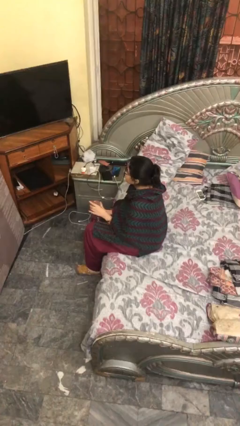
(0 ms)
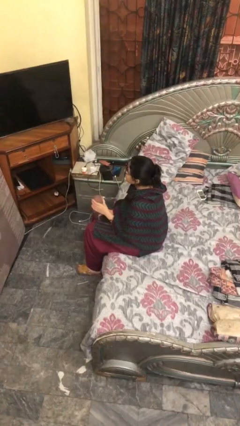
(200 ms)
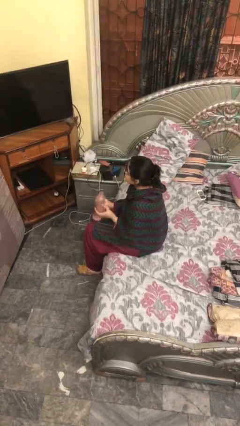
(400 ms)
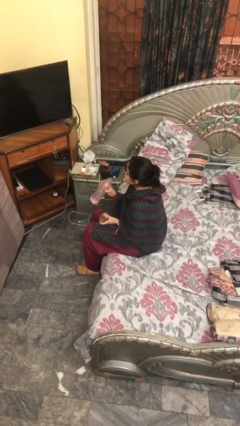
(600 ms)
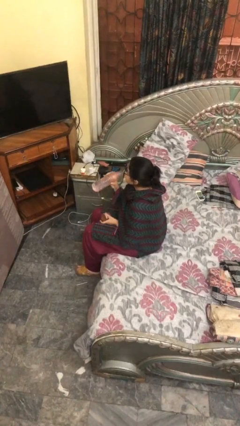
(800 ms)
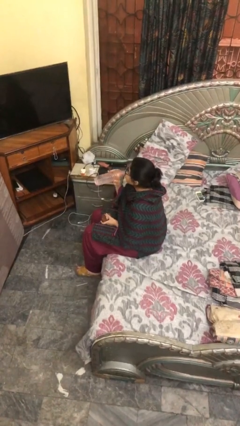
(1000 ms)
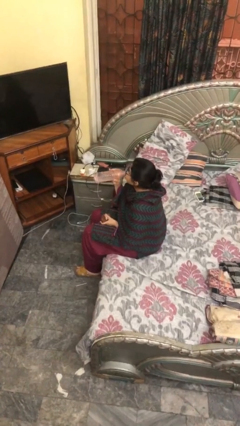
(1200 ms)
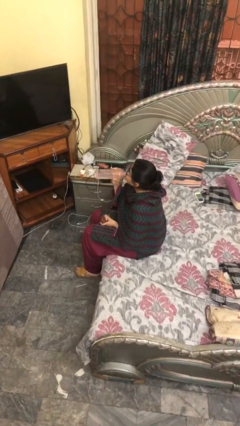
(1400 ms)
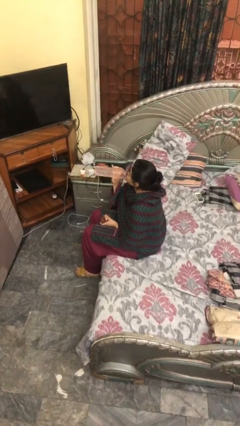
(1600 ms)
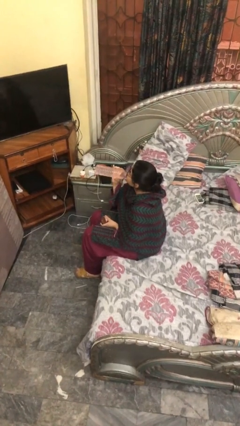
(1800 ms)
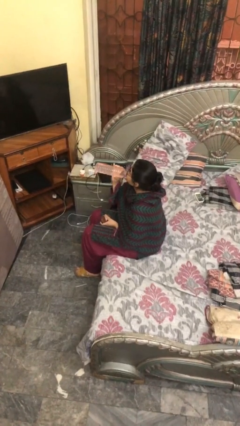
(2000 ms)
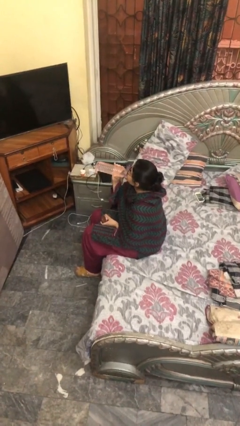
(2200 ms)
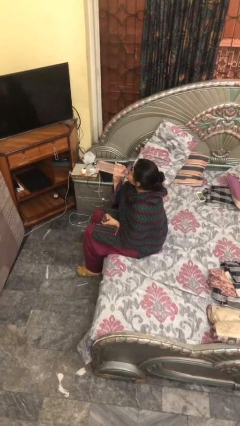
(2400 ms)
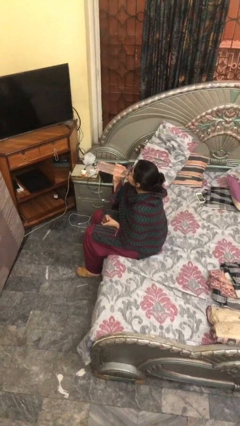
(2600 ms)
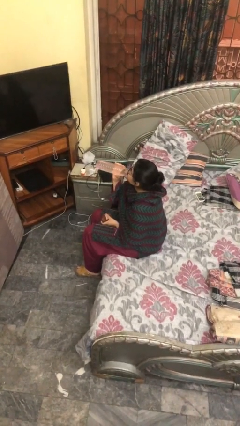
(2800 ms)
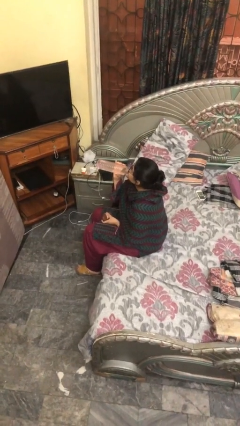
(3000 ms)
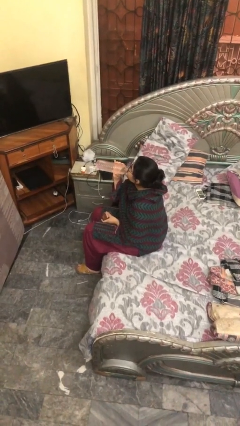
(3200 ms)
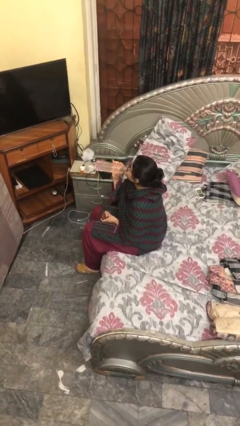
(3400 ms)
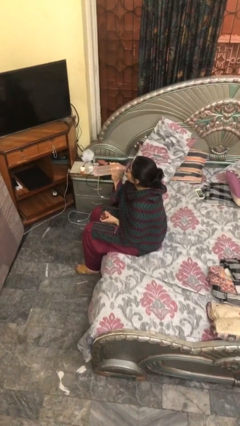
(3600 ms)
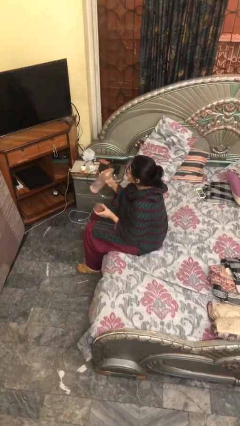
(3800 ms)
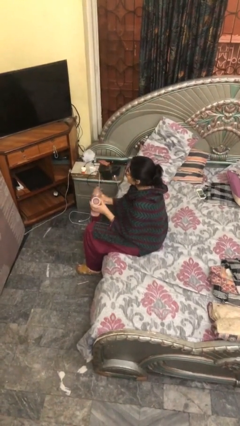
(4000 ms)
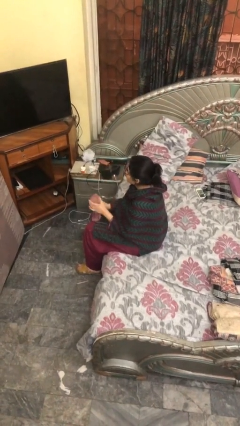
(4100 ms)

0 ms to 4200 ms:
person drinks from bottle

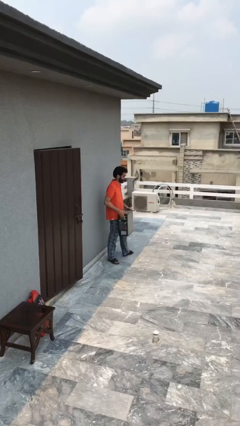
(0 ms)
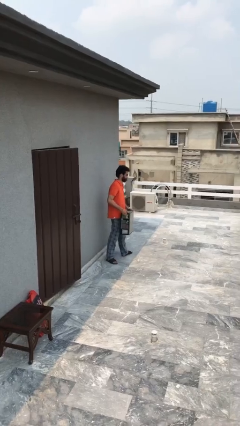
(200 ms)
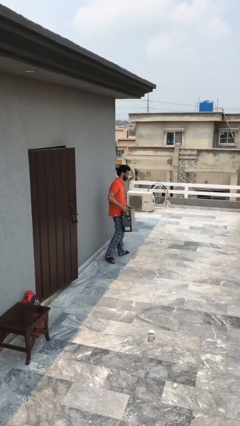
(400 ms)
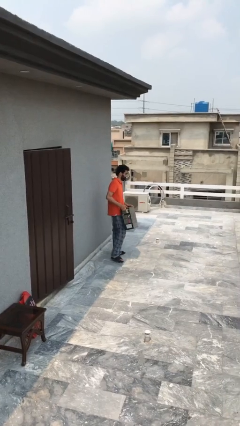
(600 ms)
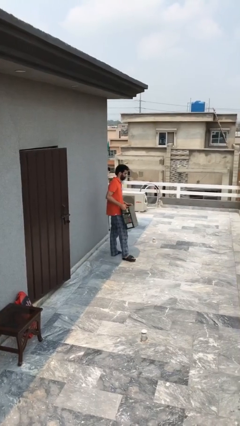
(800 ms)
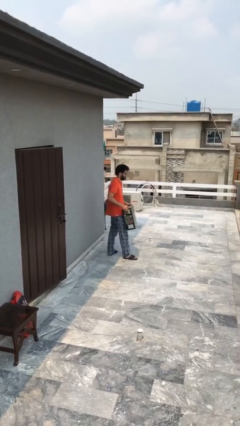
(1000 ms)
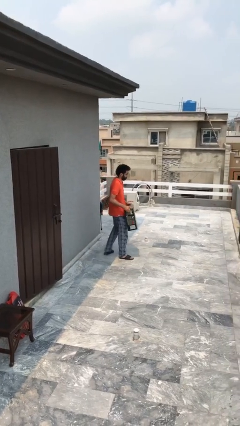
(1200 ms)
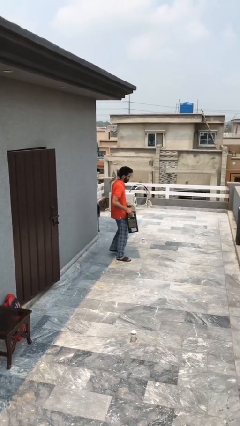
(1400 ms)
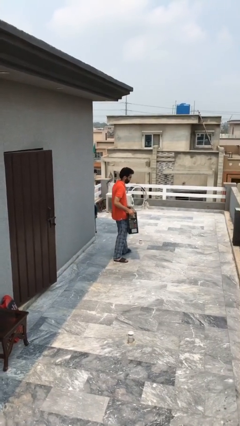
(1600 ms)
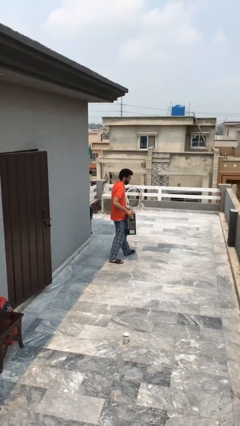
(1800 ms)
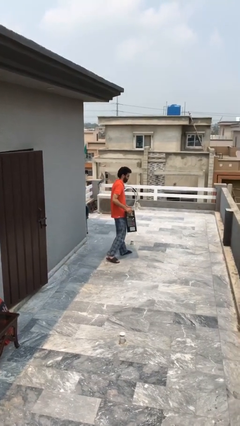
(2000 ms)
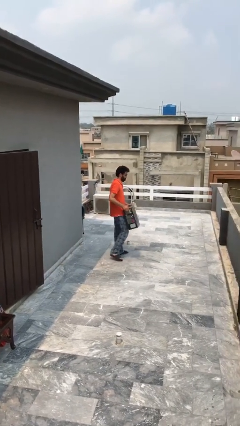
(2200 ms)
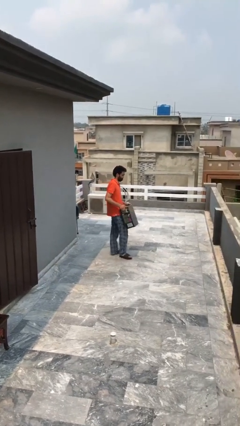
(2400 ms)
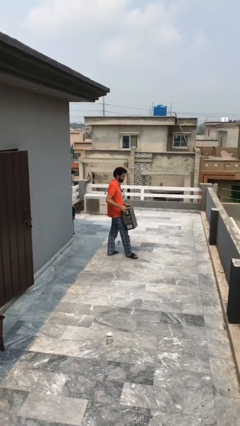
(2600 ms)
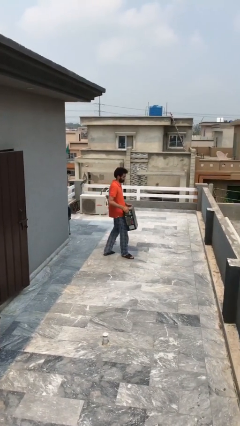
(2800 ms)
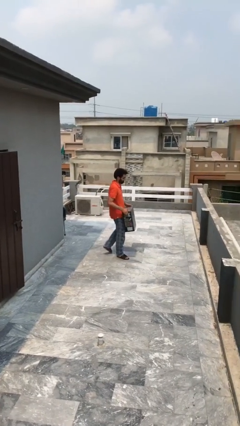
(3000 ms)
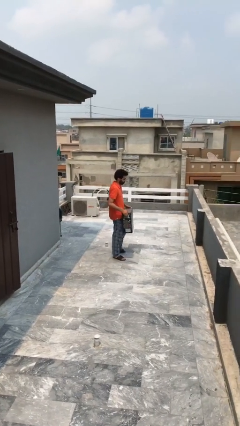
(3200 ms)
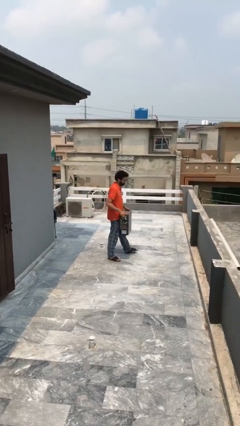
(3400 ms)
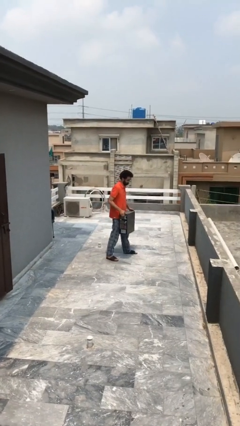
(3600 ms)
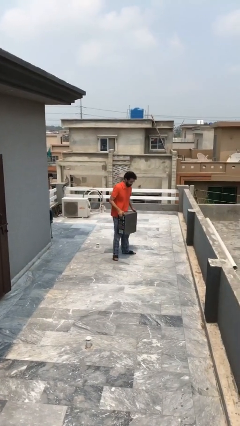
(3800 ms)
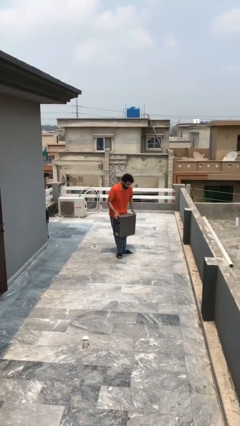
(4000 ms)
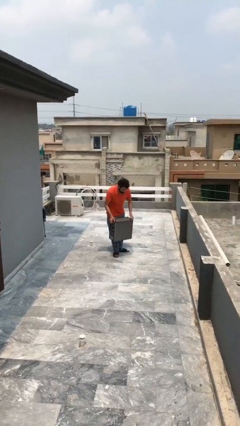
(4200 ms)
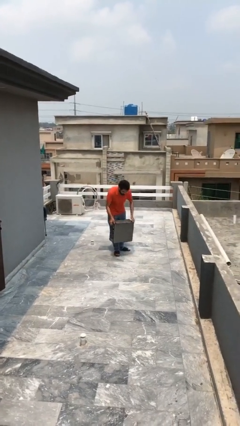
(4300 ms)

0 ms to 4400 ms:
person carries heavy object

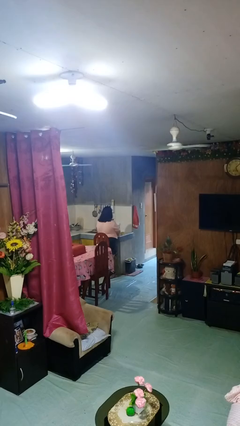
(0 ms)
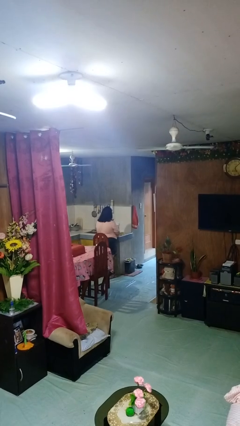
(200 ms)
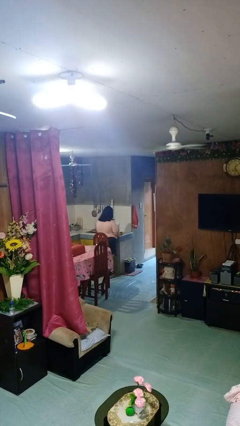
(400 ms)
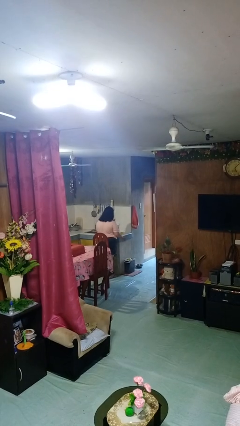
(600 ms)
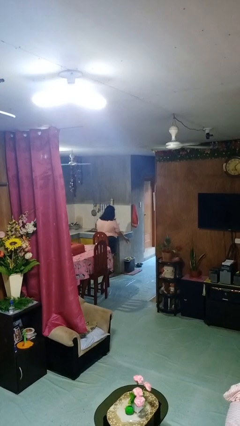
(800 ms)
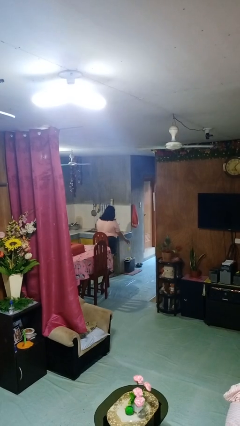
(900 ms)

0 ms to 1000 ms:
person discards trash

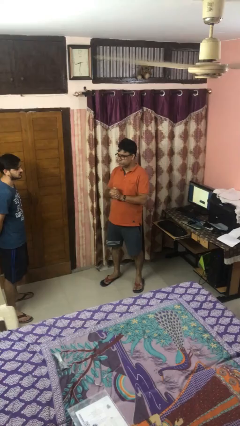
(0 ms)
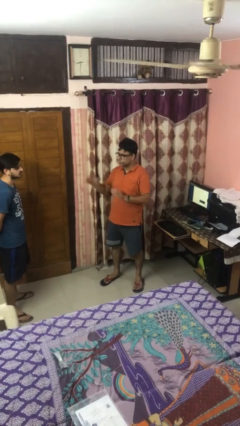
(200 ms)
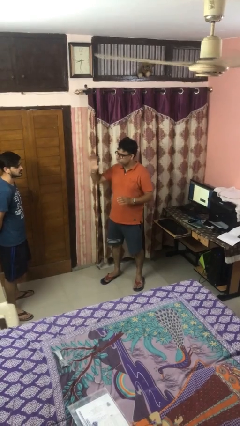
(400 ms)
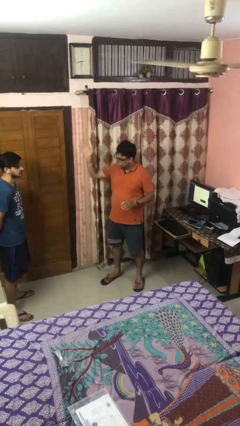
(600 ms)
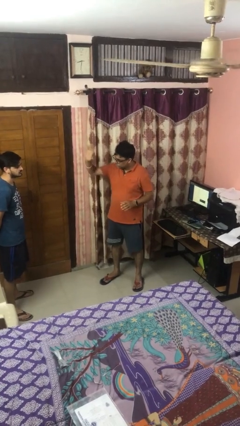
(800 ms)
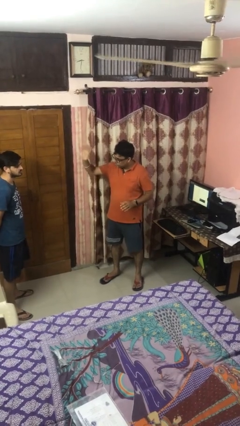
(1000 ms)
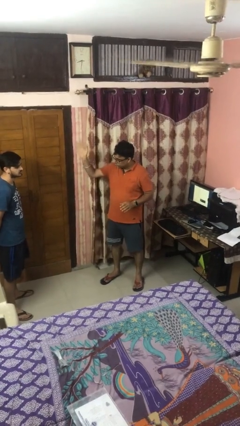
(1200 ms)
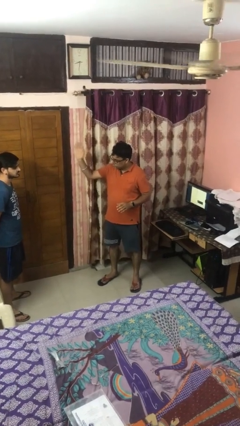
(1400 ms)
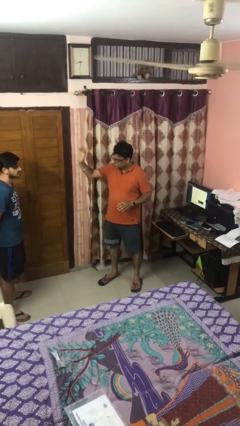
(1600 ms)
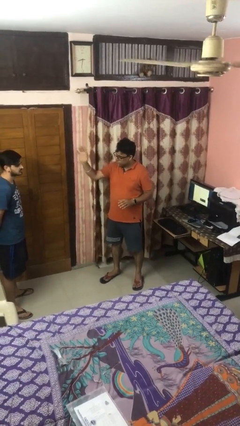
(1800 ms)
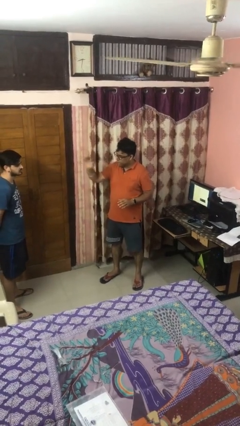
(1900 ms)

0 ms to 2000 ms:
person waves at person

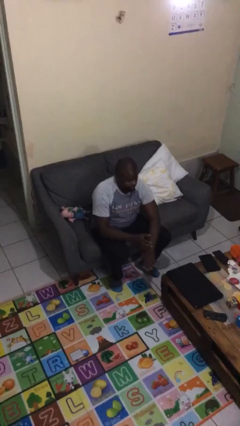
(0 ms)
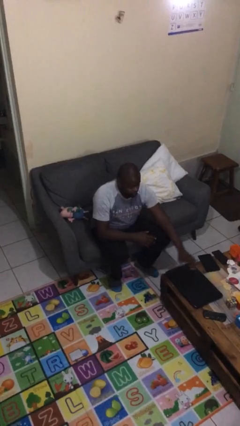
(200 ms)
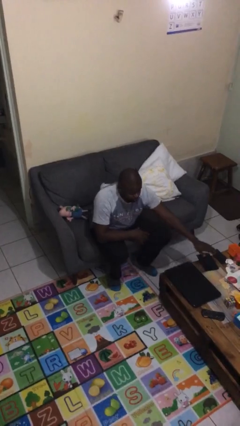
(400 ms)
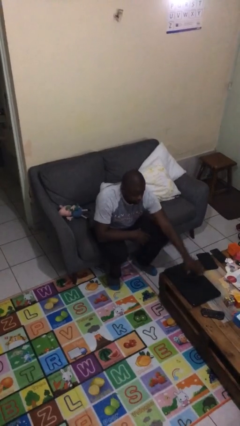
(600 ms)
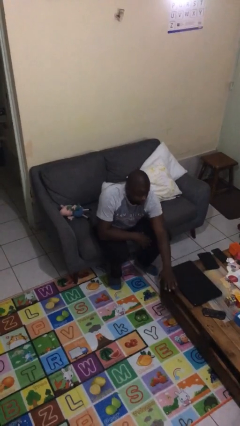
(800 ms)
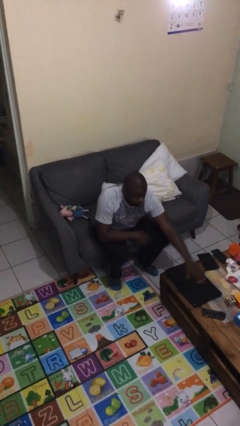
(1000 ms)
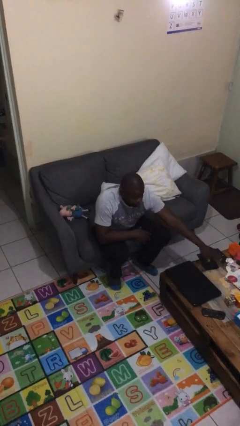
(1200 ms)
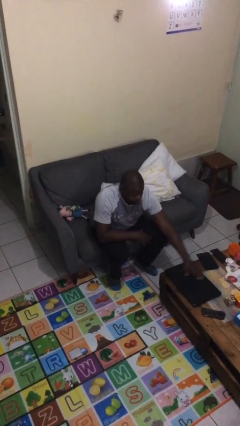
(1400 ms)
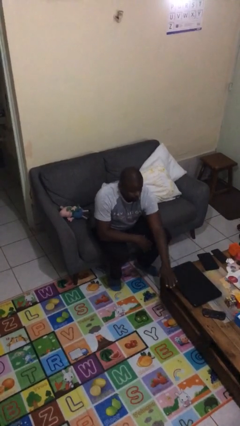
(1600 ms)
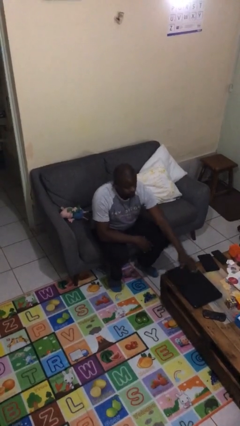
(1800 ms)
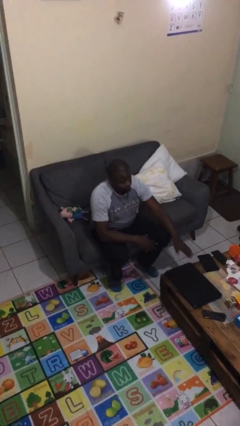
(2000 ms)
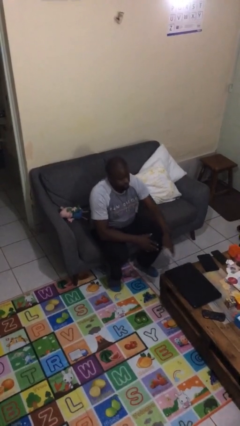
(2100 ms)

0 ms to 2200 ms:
person waves hand over object

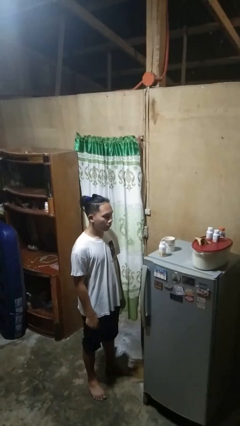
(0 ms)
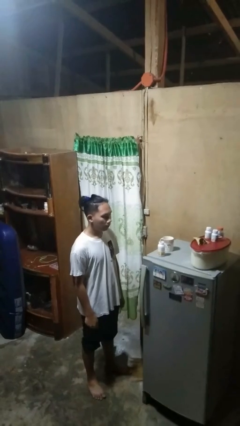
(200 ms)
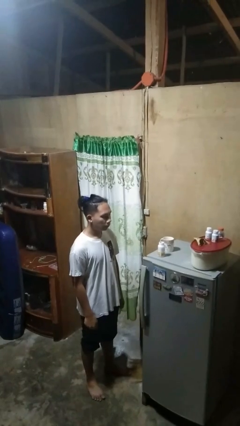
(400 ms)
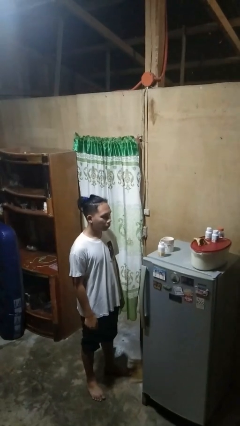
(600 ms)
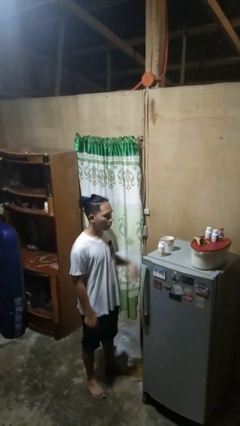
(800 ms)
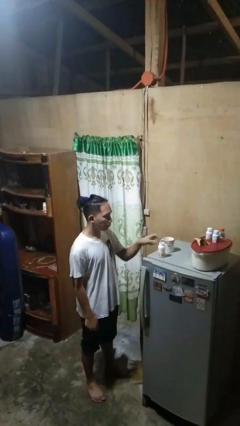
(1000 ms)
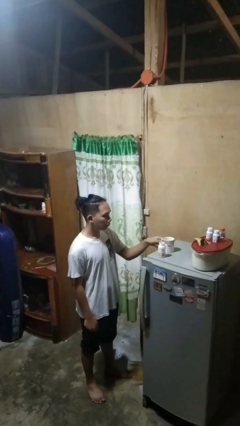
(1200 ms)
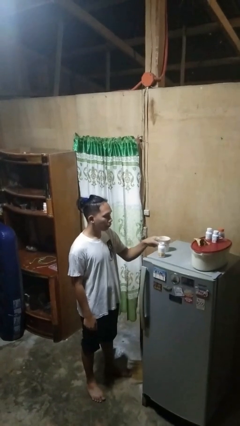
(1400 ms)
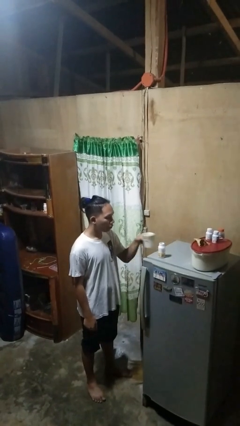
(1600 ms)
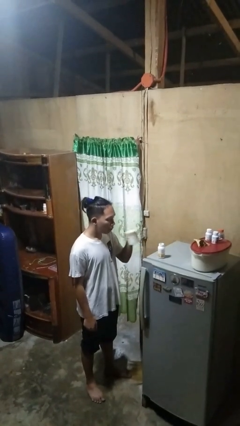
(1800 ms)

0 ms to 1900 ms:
person drinks from cup

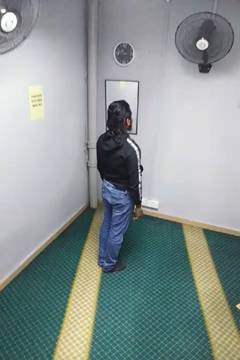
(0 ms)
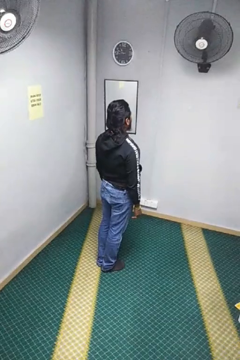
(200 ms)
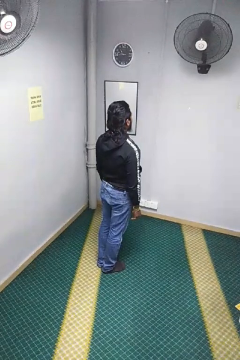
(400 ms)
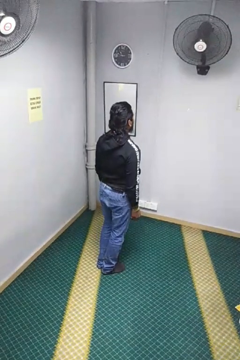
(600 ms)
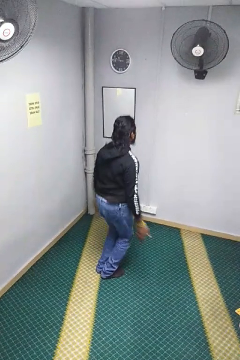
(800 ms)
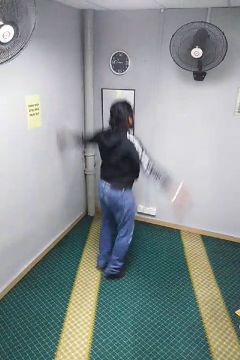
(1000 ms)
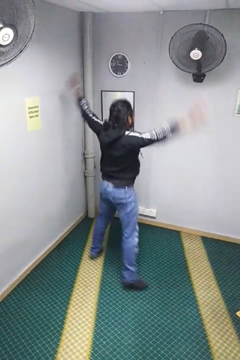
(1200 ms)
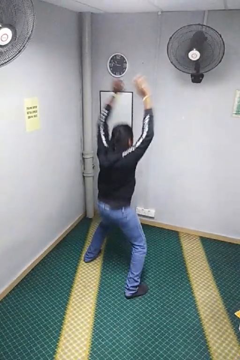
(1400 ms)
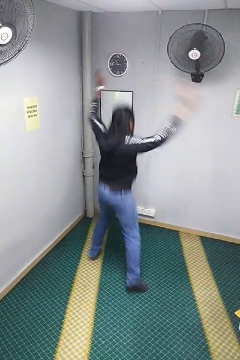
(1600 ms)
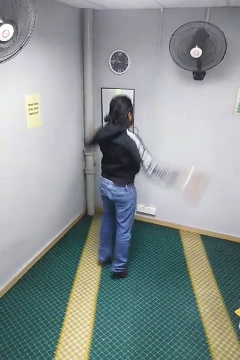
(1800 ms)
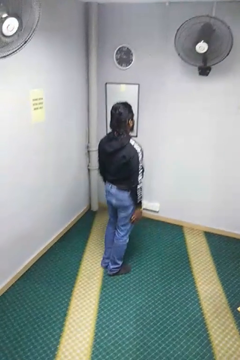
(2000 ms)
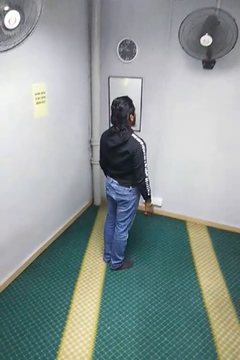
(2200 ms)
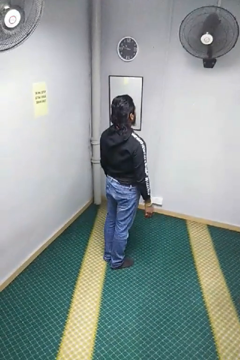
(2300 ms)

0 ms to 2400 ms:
person exercises with jumping jacks
